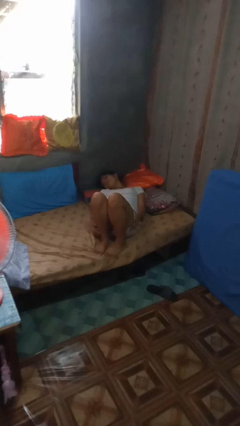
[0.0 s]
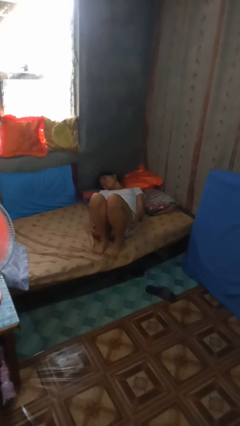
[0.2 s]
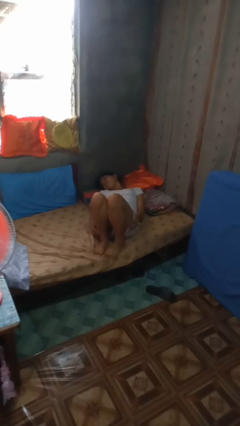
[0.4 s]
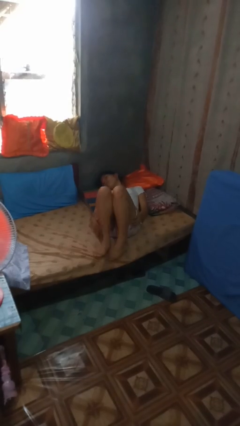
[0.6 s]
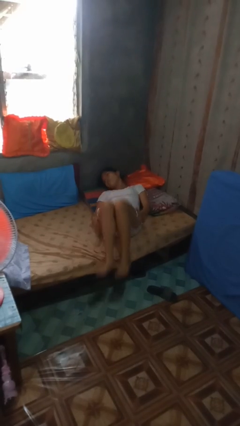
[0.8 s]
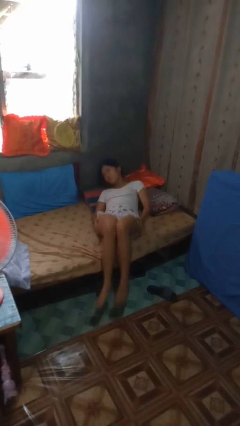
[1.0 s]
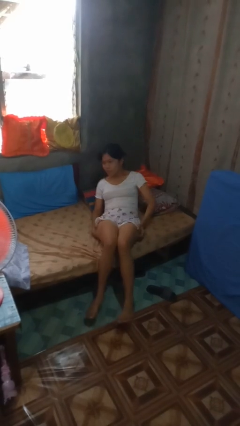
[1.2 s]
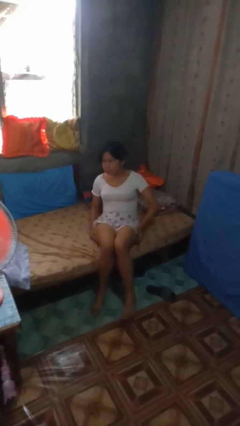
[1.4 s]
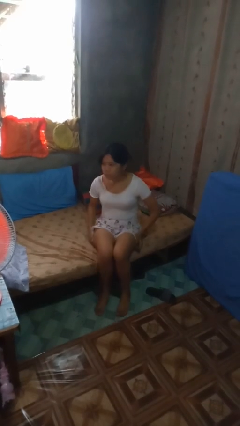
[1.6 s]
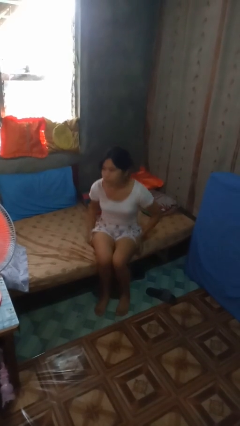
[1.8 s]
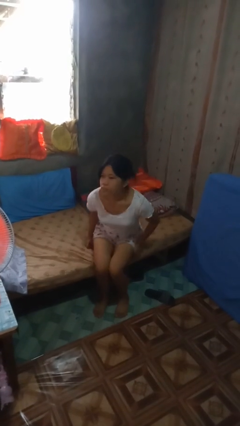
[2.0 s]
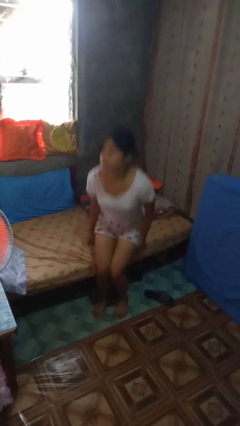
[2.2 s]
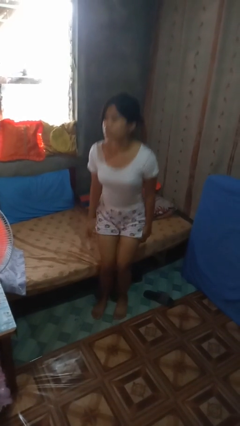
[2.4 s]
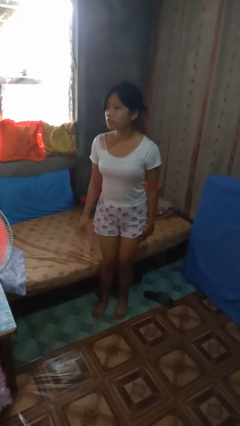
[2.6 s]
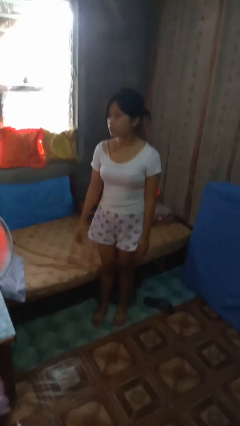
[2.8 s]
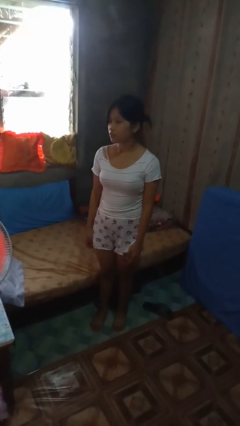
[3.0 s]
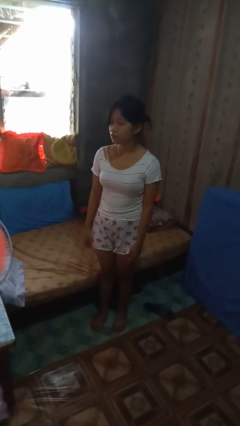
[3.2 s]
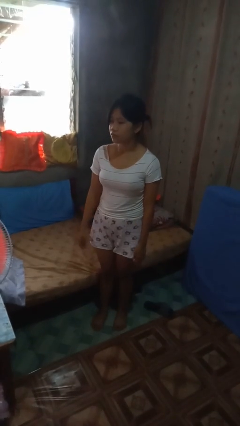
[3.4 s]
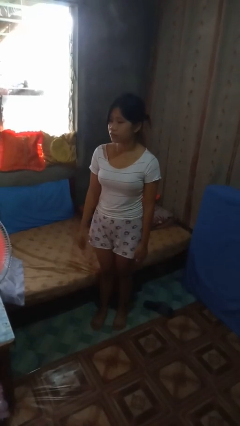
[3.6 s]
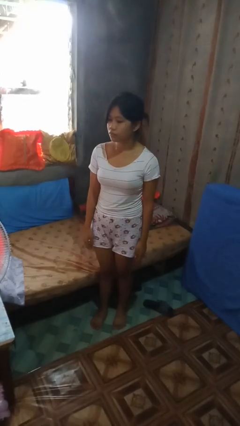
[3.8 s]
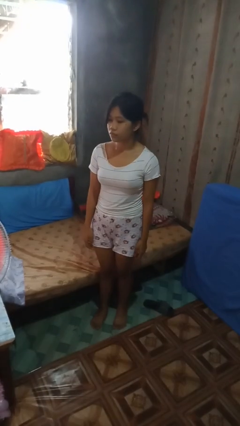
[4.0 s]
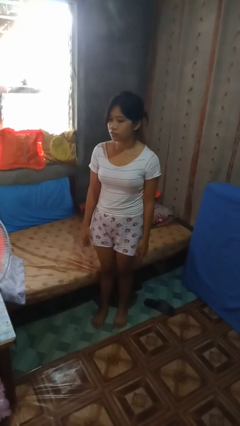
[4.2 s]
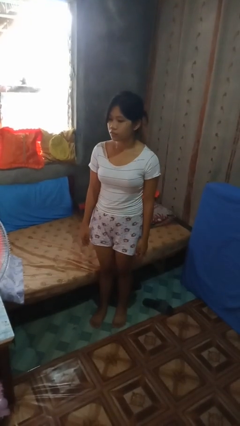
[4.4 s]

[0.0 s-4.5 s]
person stands up

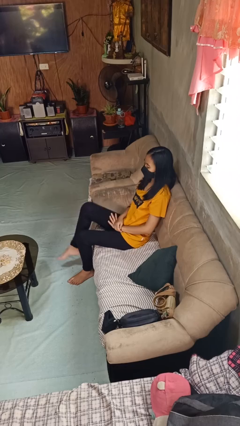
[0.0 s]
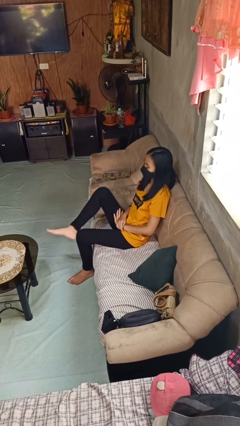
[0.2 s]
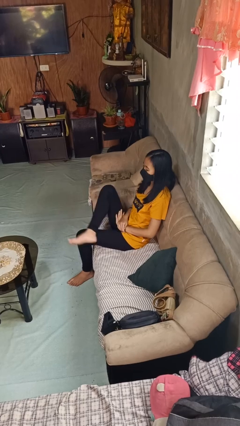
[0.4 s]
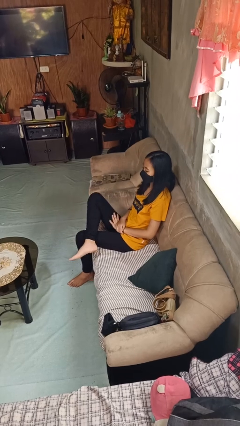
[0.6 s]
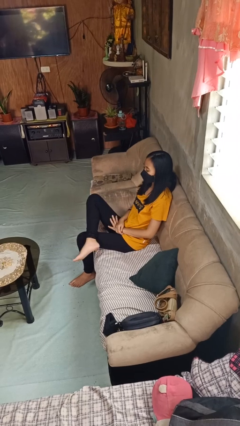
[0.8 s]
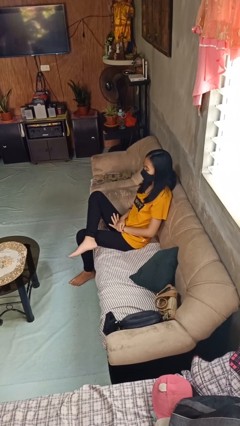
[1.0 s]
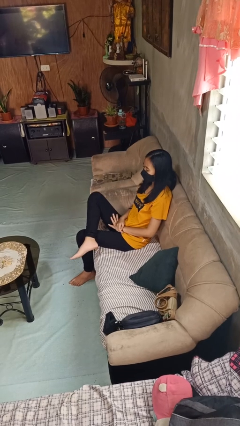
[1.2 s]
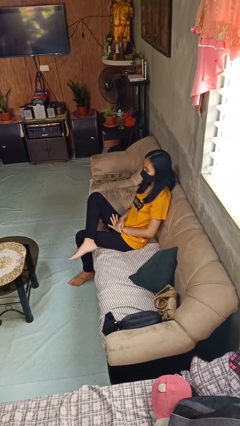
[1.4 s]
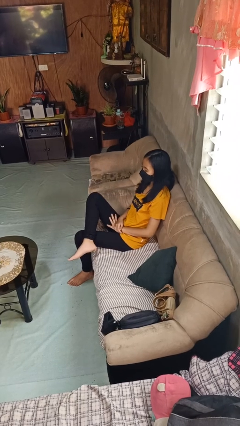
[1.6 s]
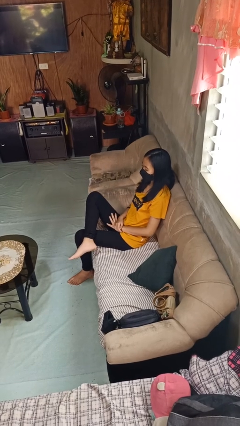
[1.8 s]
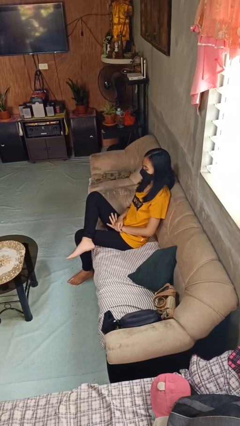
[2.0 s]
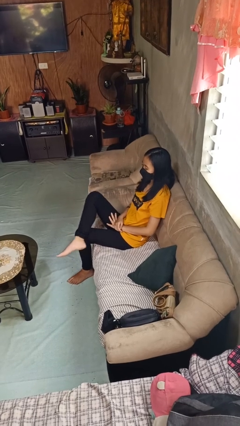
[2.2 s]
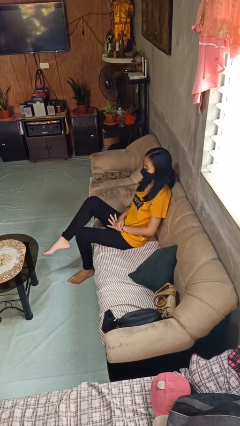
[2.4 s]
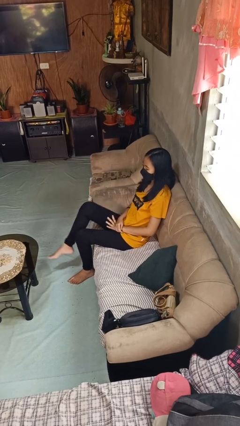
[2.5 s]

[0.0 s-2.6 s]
person crosses legs

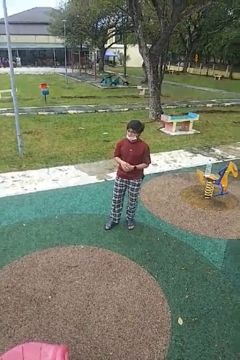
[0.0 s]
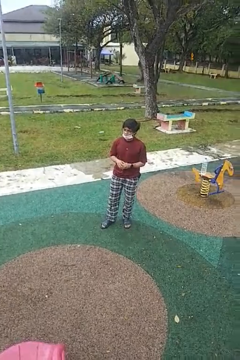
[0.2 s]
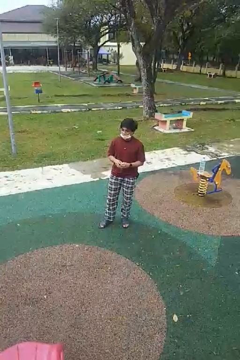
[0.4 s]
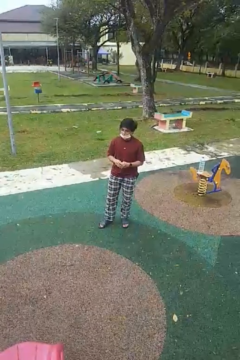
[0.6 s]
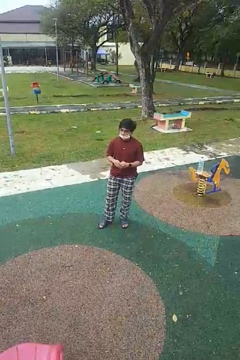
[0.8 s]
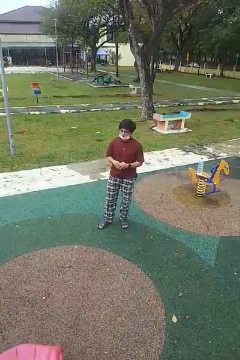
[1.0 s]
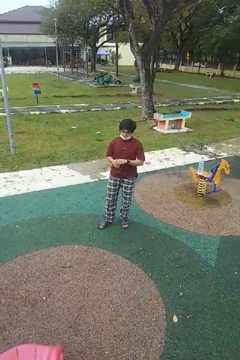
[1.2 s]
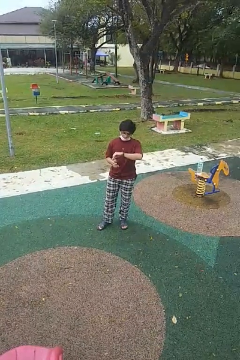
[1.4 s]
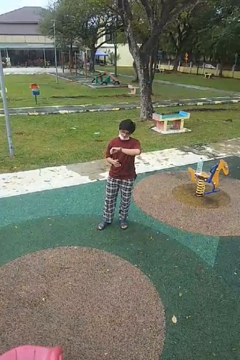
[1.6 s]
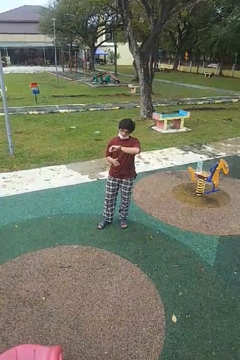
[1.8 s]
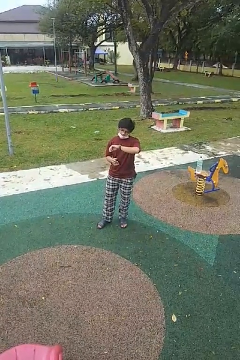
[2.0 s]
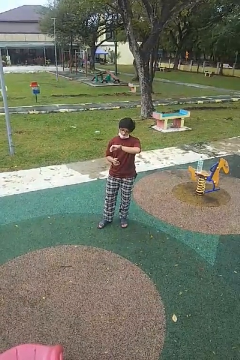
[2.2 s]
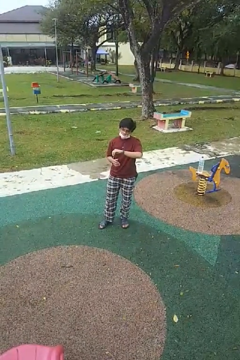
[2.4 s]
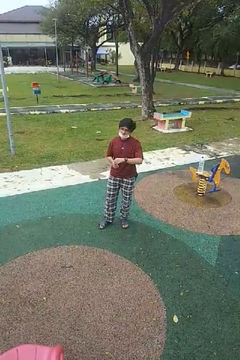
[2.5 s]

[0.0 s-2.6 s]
person looks at wristwatch

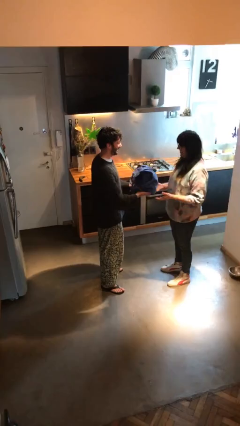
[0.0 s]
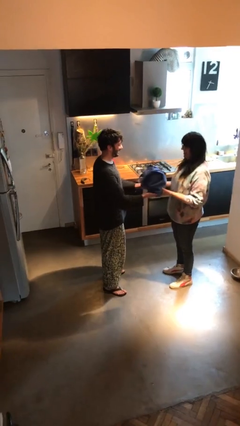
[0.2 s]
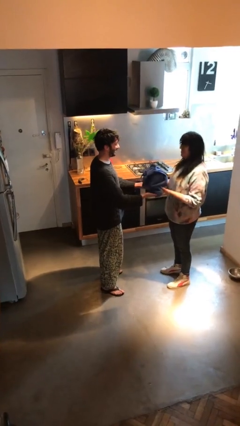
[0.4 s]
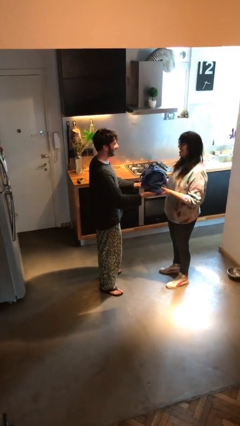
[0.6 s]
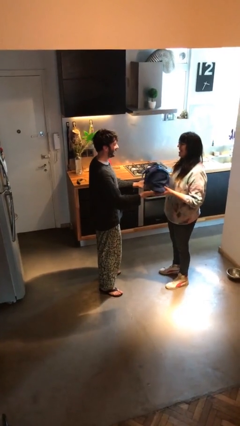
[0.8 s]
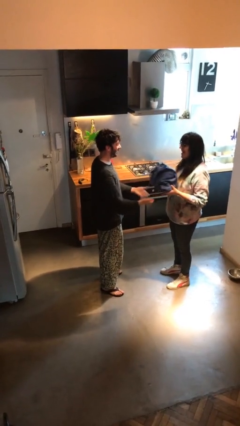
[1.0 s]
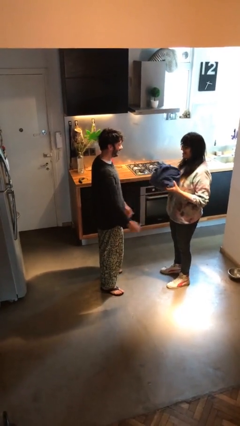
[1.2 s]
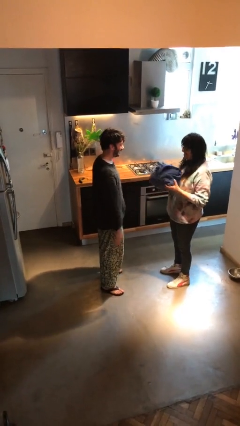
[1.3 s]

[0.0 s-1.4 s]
person transfers object to person

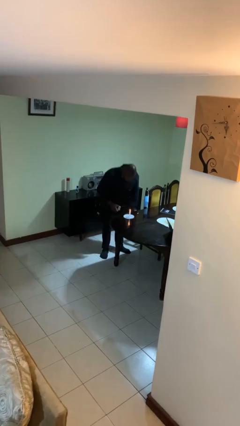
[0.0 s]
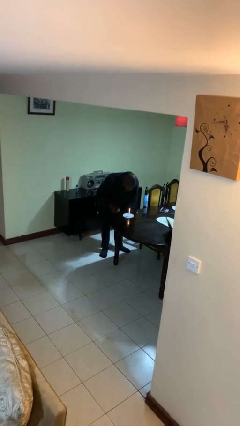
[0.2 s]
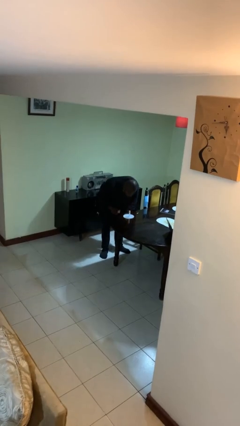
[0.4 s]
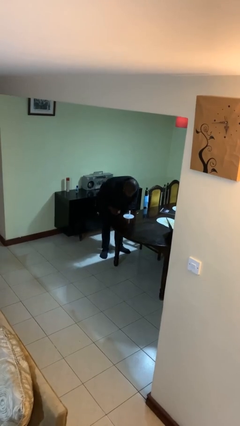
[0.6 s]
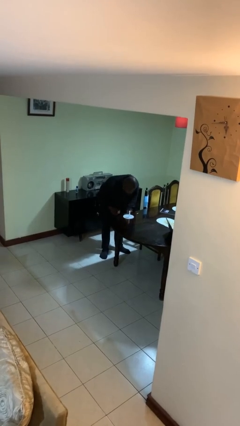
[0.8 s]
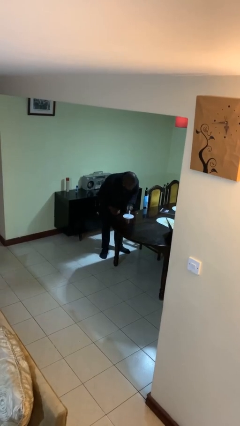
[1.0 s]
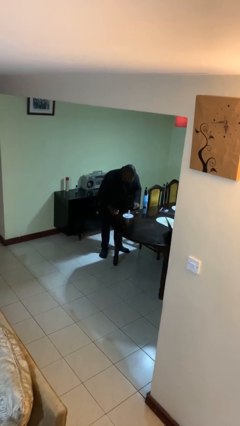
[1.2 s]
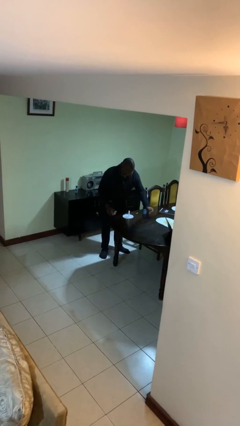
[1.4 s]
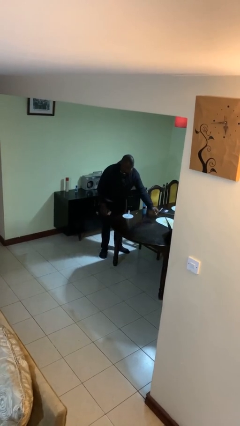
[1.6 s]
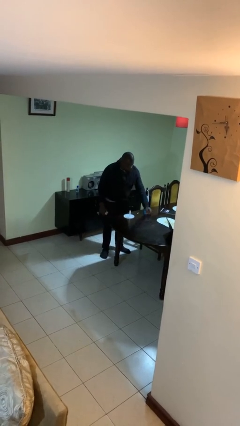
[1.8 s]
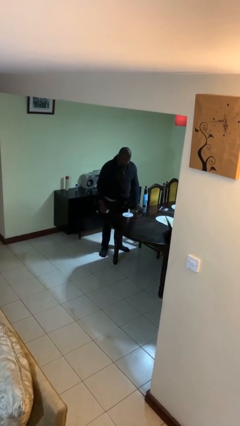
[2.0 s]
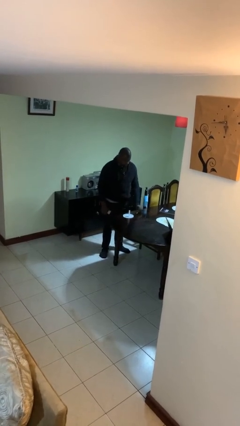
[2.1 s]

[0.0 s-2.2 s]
person extinguishes candle

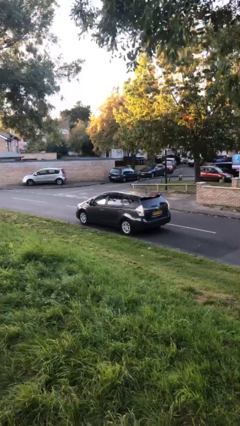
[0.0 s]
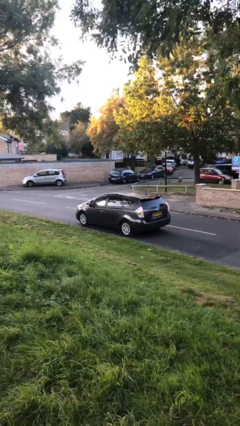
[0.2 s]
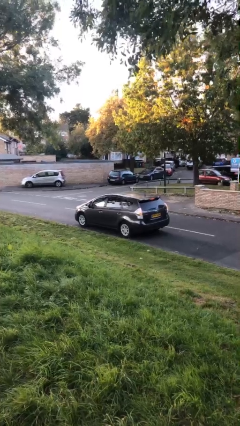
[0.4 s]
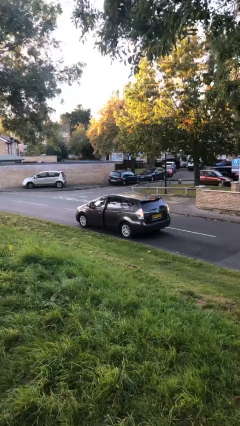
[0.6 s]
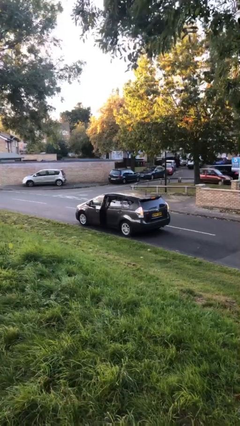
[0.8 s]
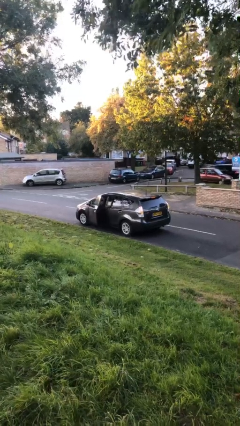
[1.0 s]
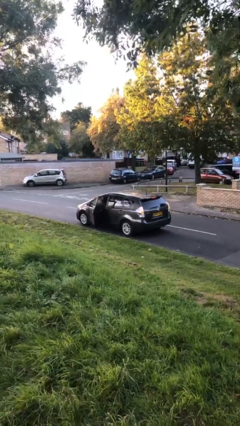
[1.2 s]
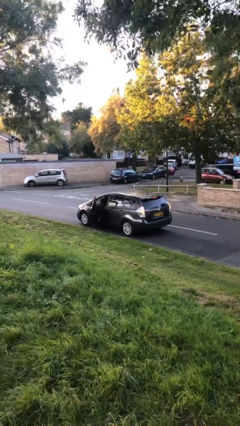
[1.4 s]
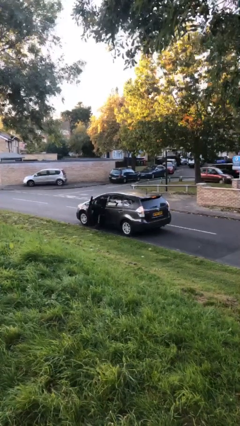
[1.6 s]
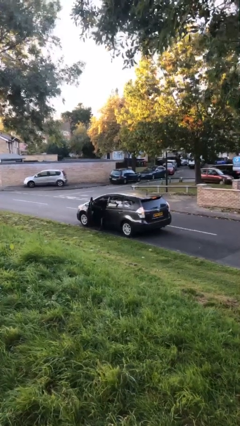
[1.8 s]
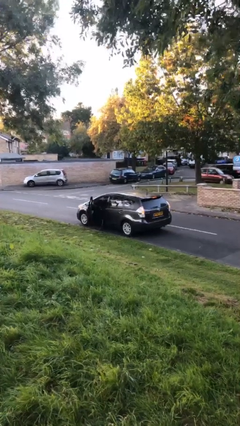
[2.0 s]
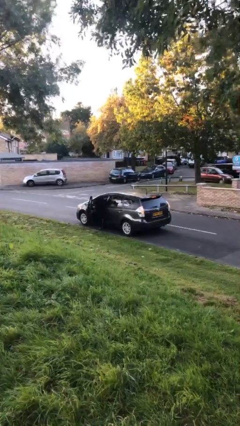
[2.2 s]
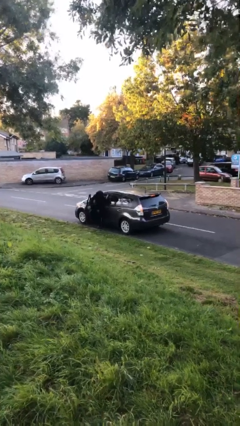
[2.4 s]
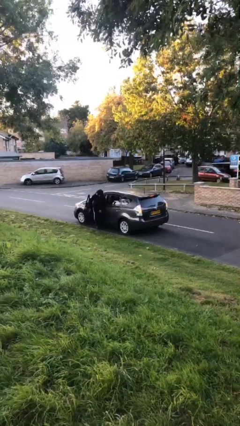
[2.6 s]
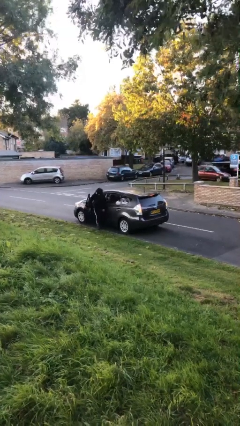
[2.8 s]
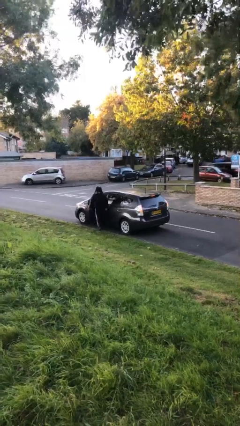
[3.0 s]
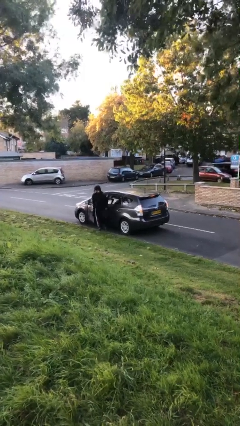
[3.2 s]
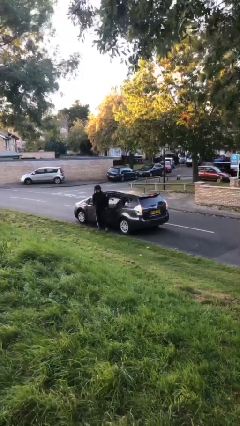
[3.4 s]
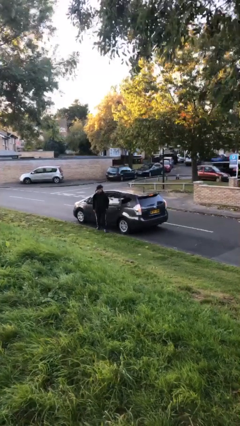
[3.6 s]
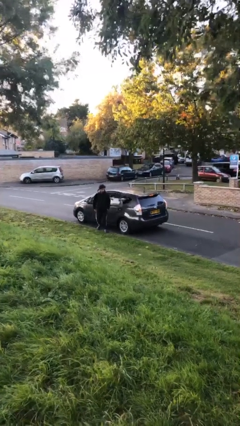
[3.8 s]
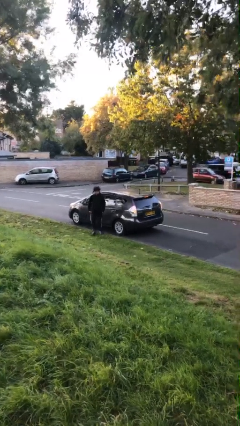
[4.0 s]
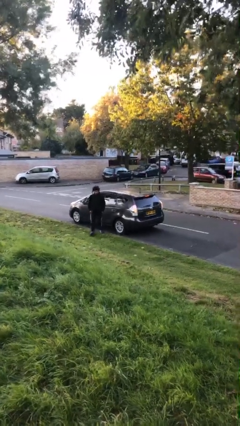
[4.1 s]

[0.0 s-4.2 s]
car drops off person

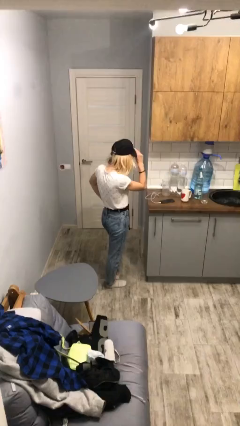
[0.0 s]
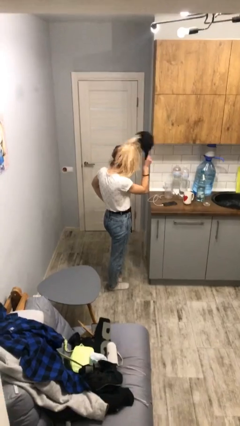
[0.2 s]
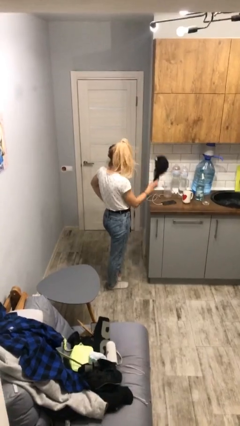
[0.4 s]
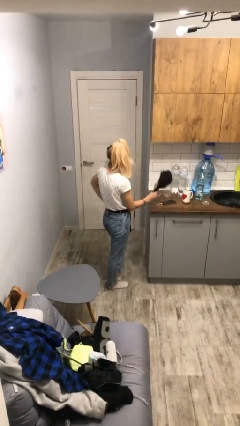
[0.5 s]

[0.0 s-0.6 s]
person takes off hat
